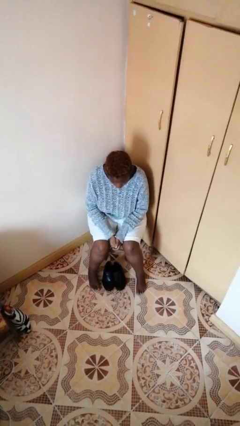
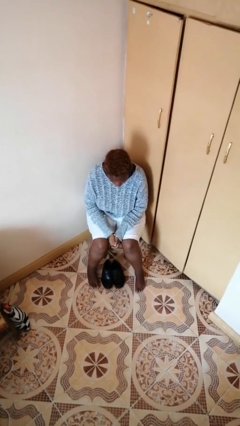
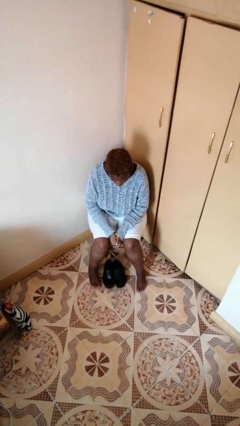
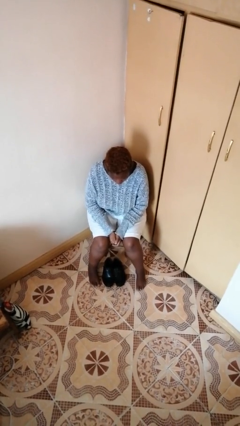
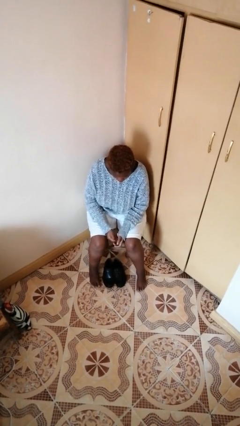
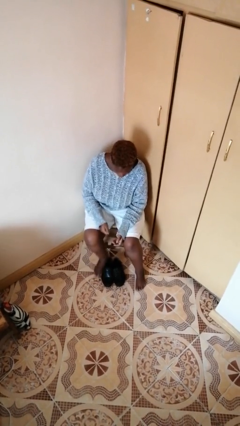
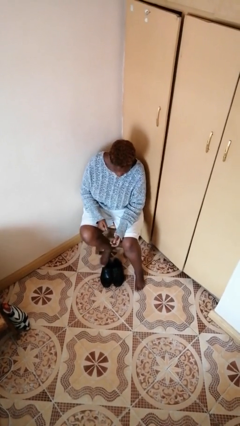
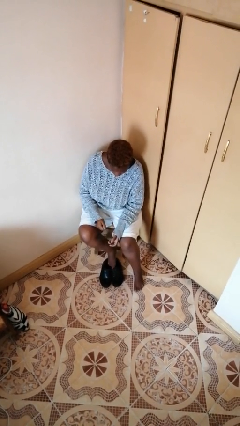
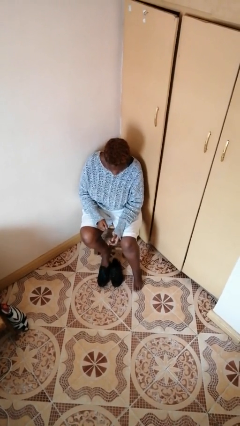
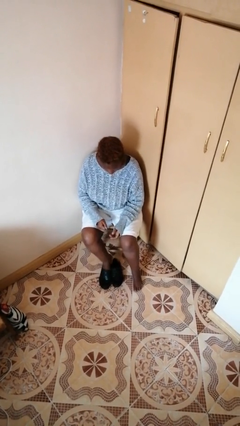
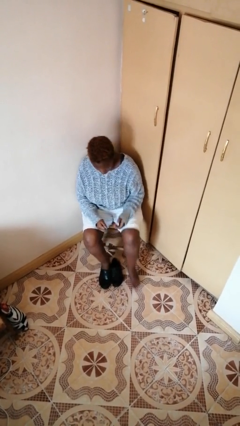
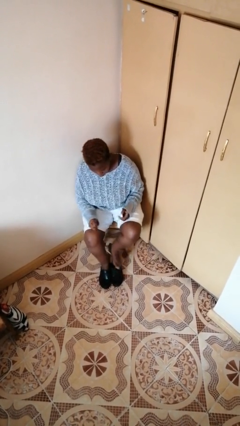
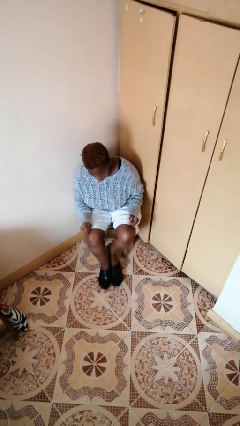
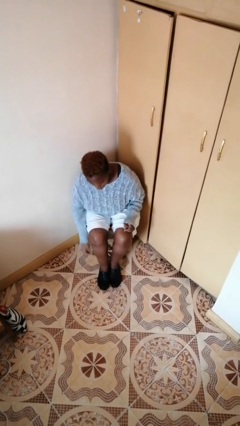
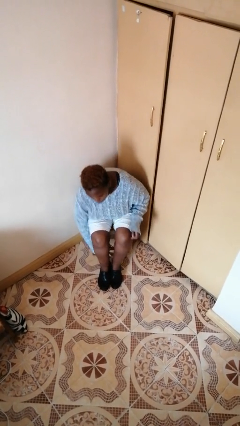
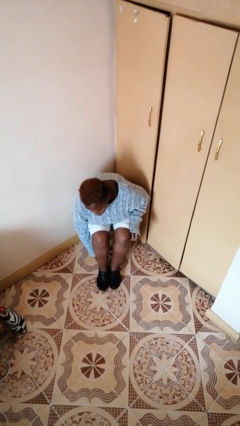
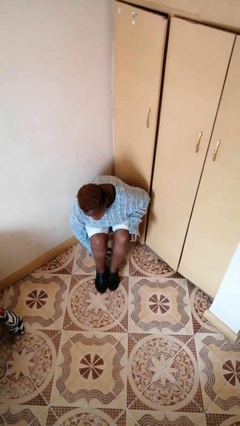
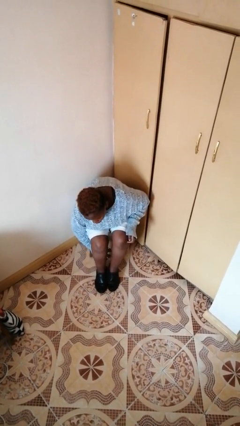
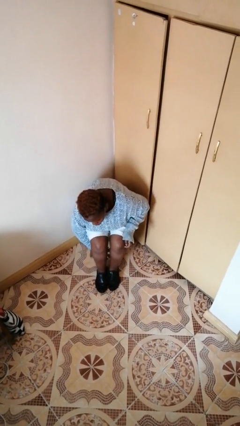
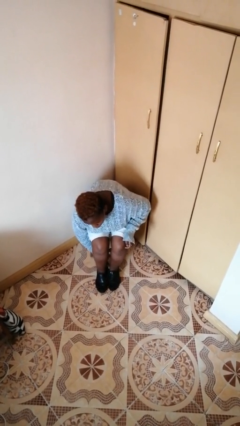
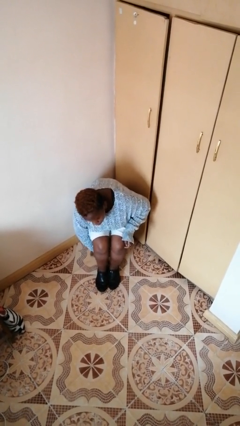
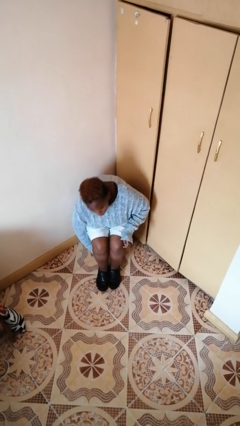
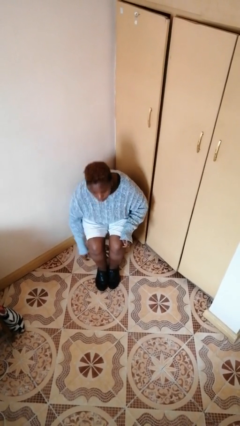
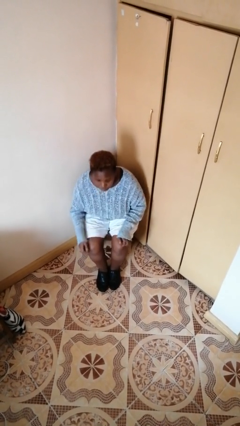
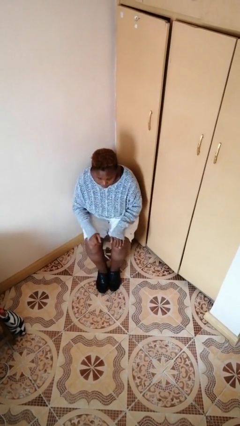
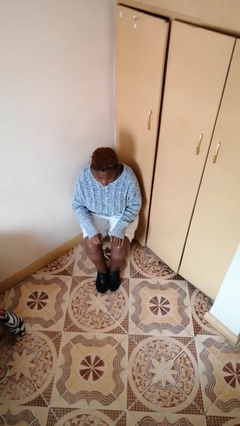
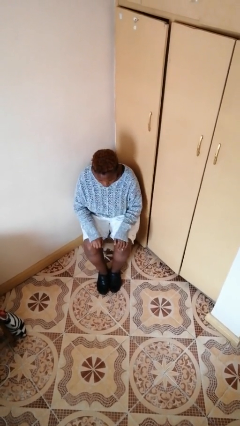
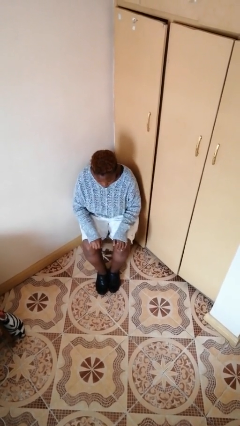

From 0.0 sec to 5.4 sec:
person puts on shoes

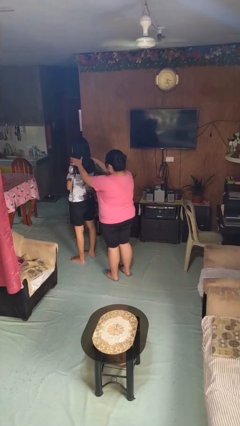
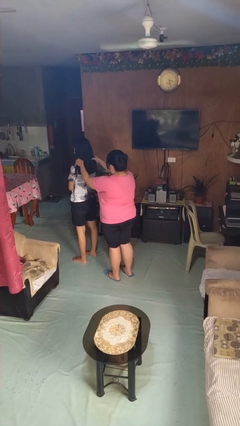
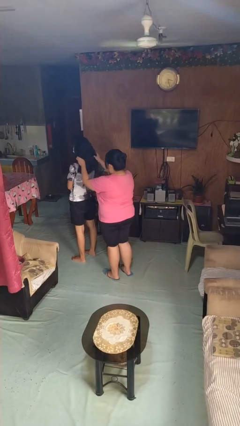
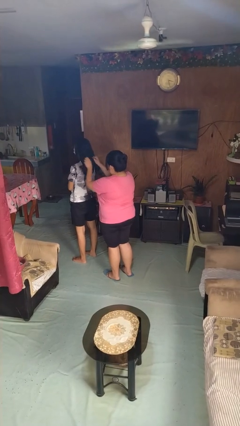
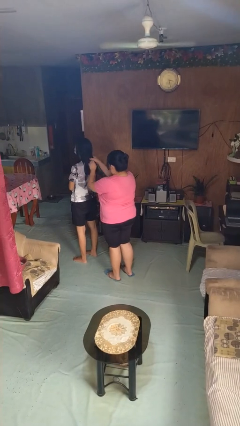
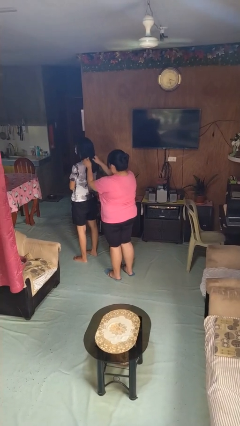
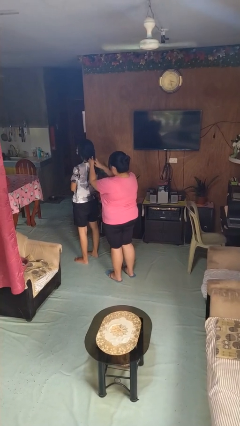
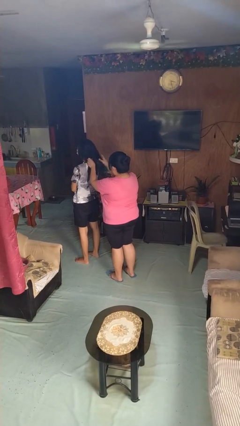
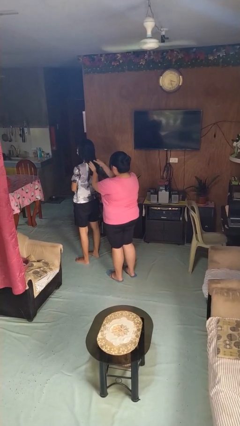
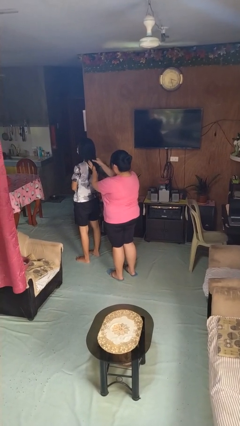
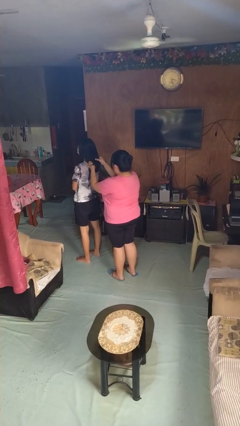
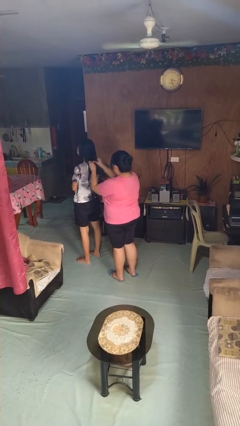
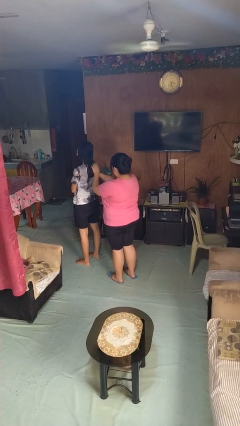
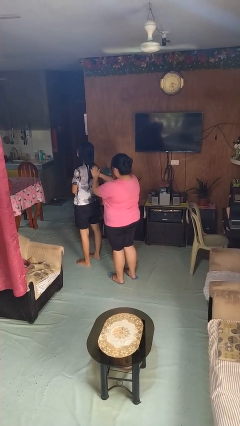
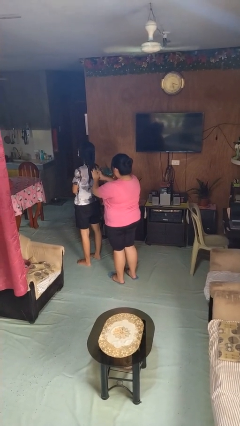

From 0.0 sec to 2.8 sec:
person braids hair of person

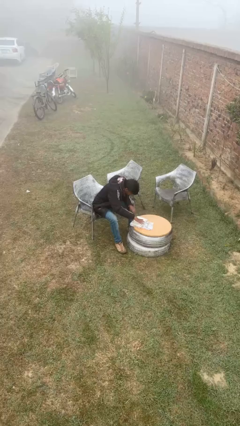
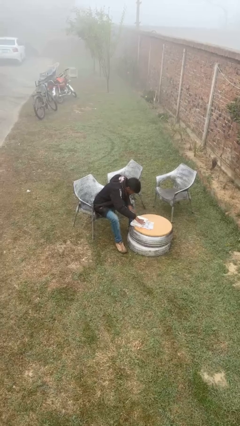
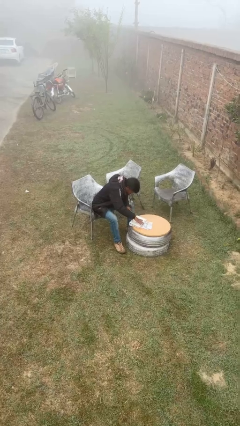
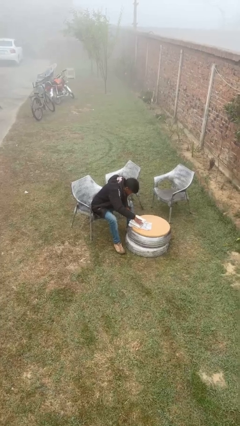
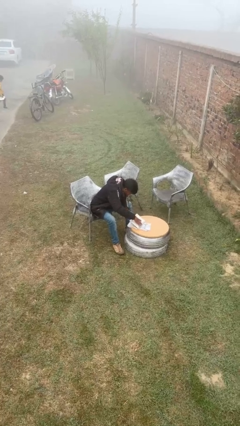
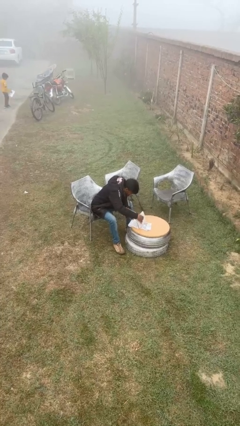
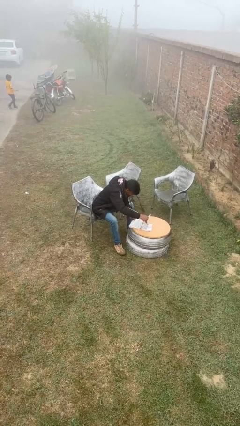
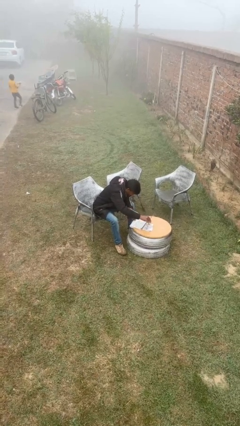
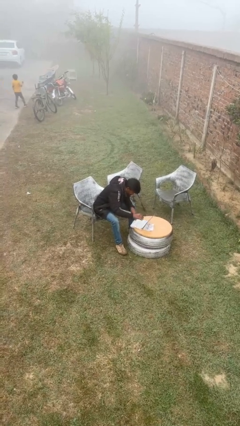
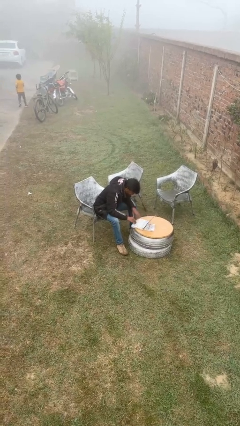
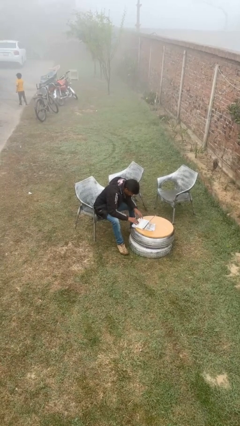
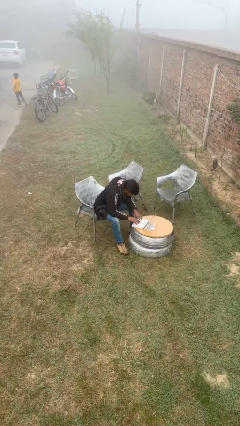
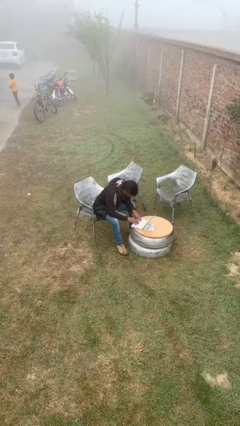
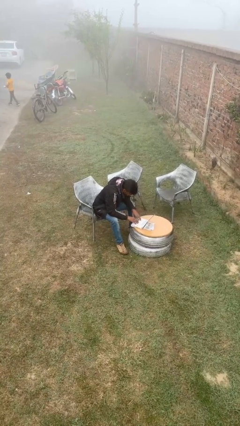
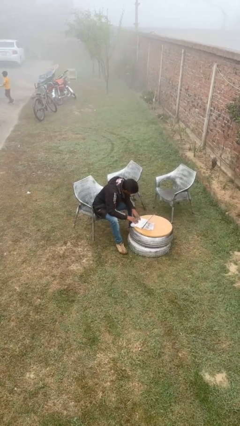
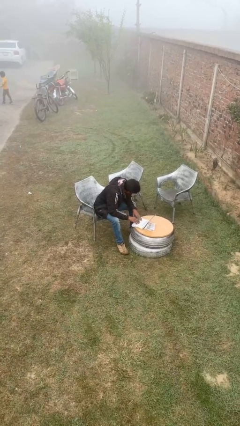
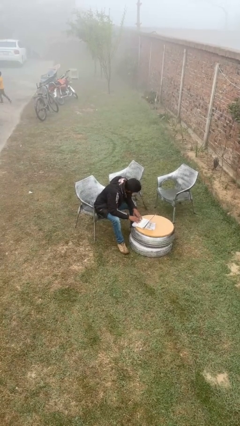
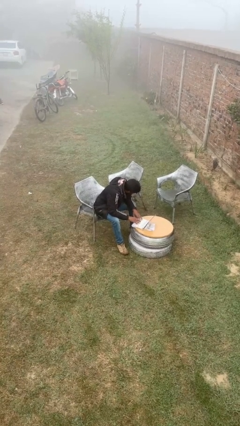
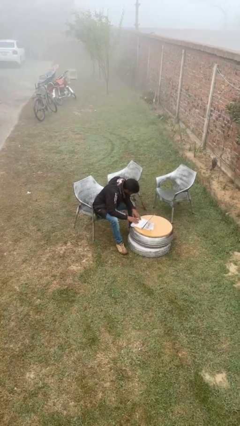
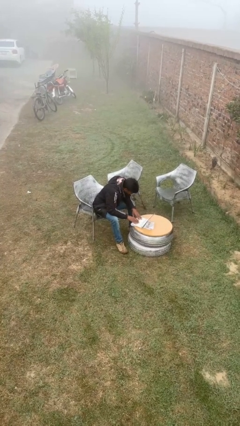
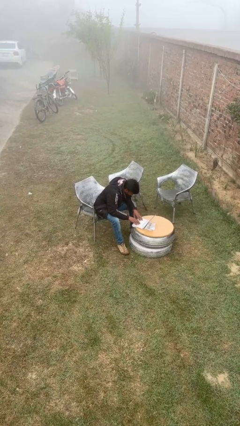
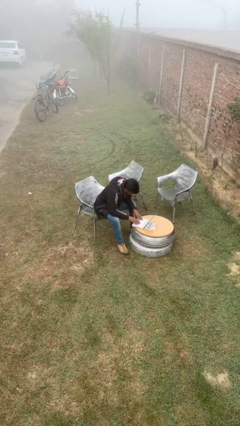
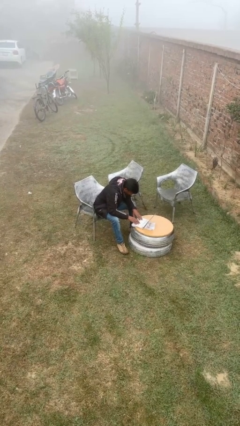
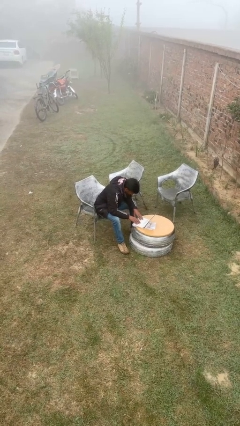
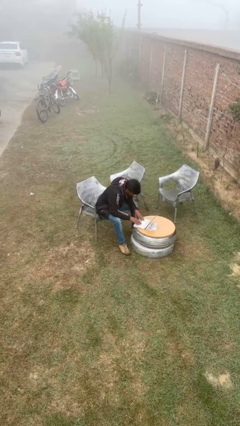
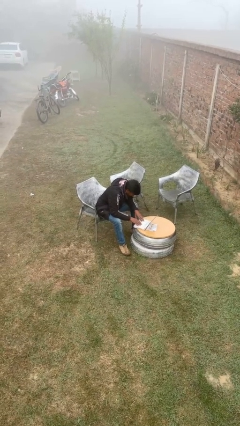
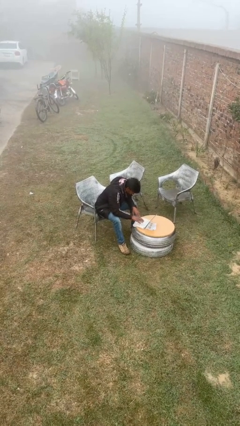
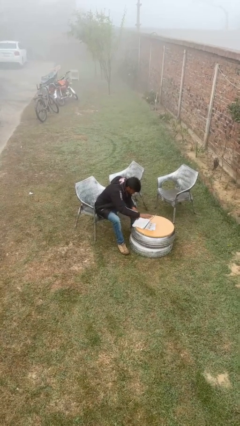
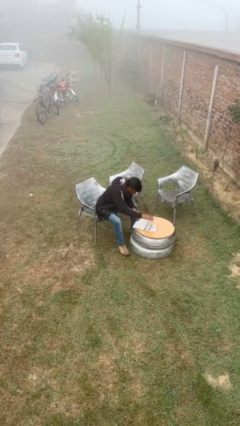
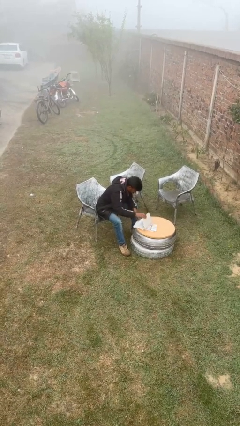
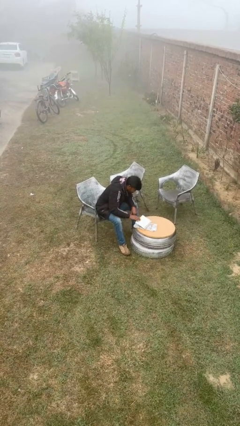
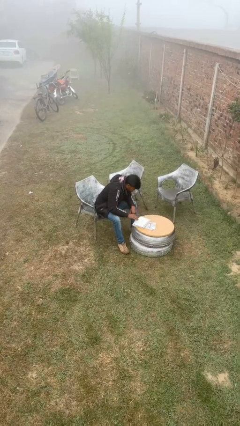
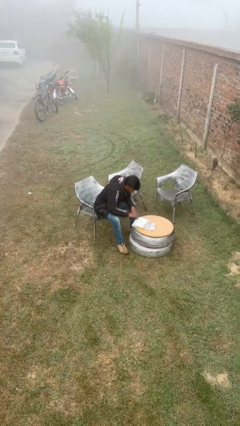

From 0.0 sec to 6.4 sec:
person interacts with laptop

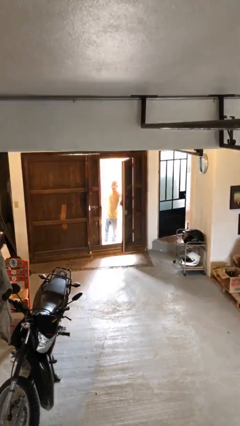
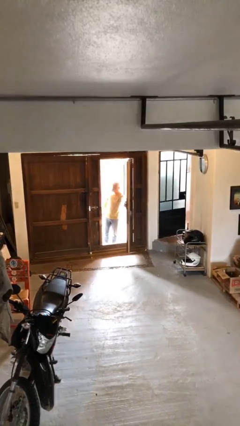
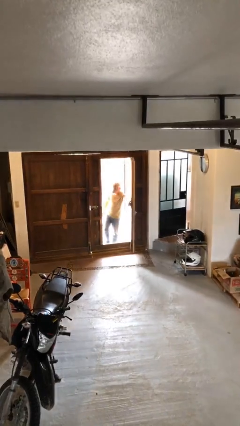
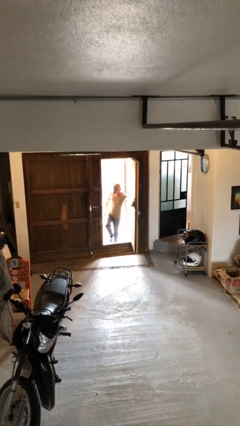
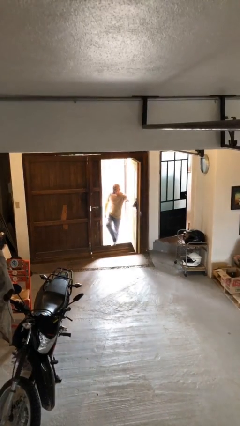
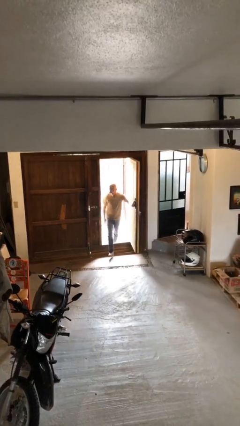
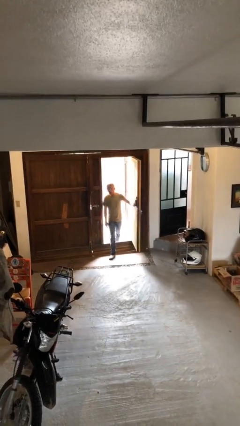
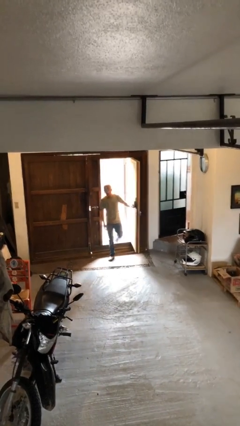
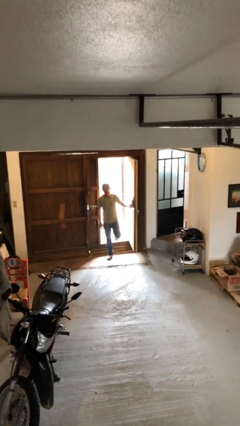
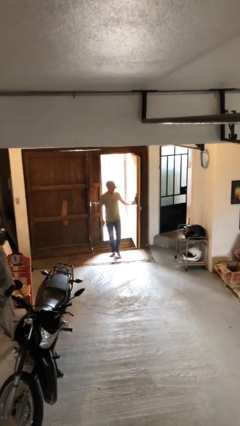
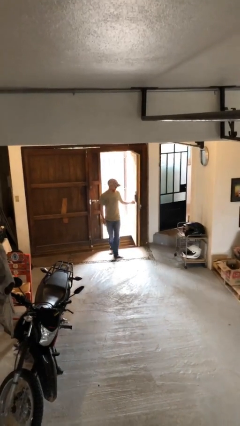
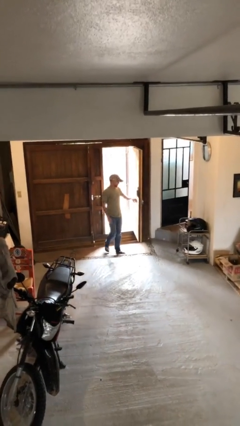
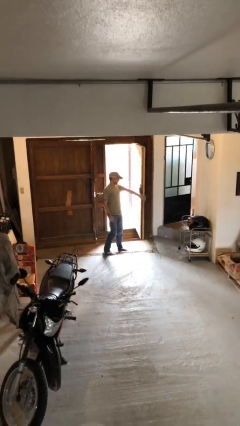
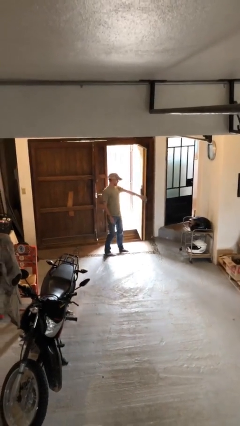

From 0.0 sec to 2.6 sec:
person enters scene through structure

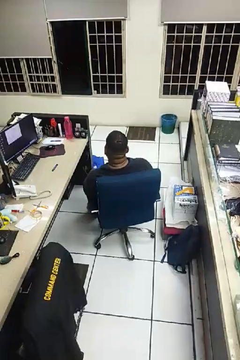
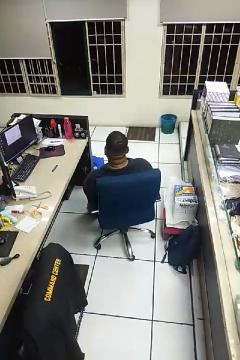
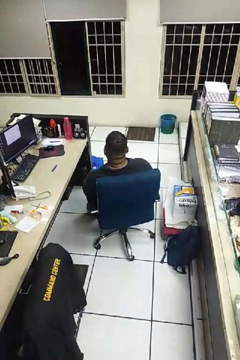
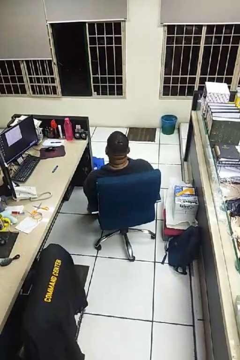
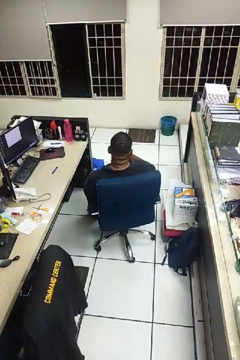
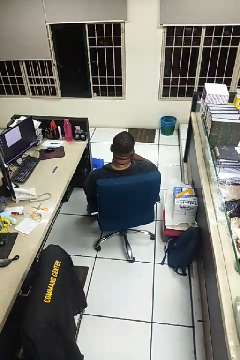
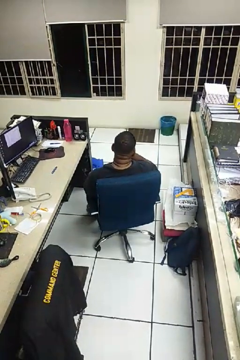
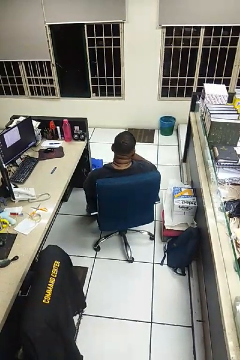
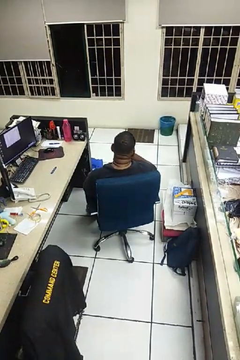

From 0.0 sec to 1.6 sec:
person gestures be quiet
